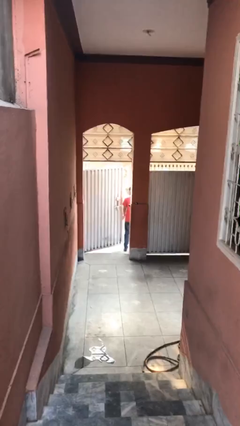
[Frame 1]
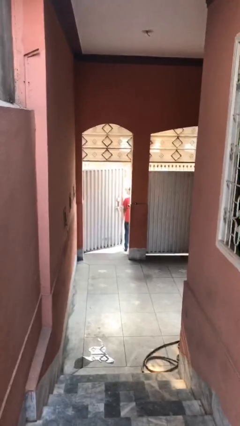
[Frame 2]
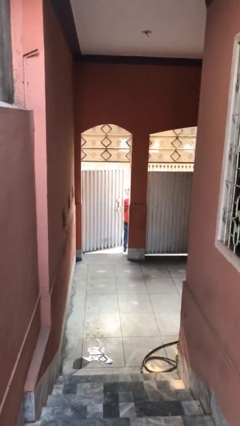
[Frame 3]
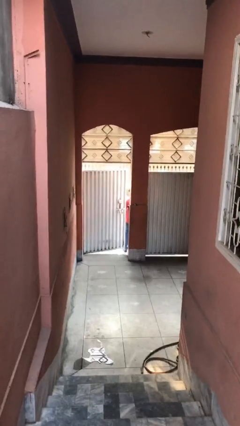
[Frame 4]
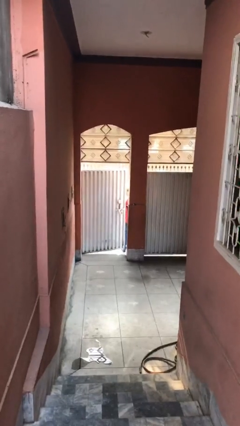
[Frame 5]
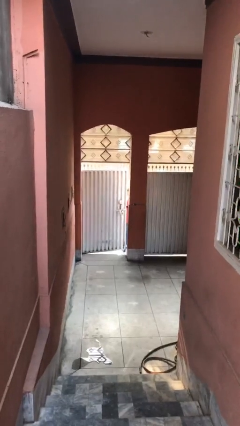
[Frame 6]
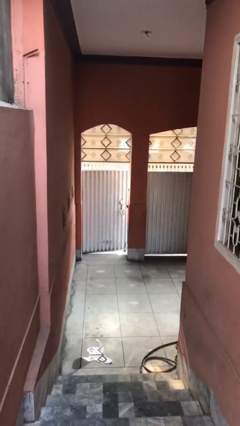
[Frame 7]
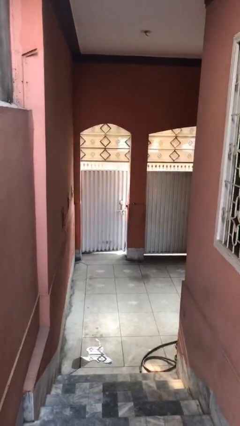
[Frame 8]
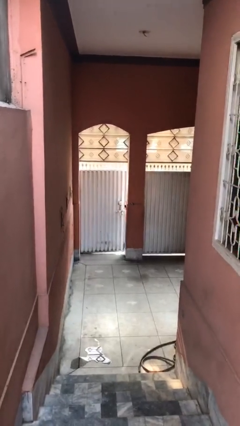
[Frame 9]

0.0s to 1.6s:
person closes facility door

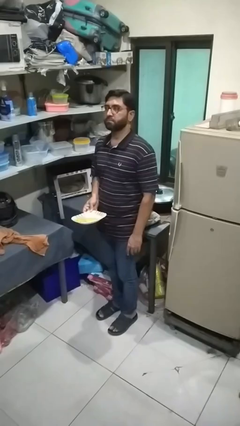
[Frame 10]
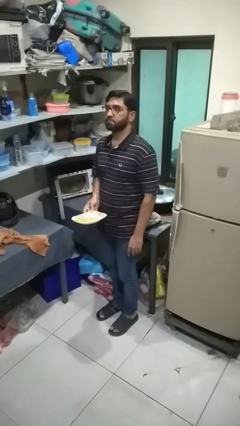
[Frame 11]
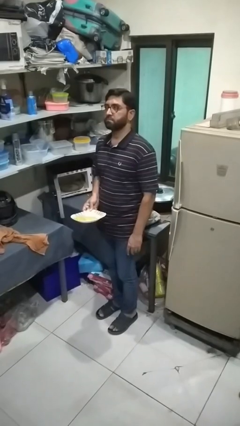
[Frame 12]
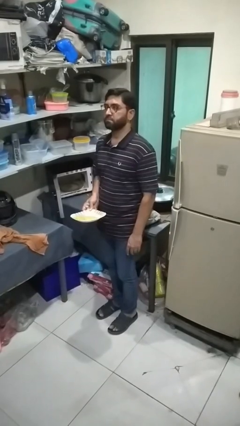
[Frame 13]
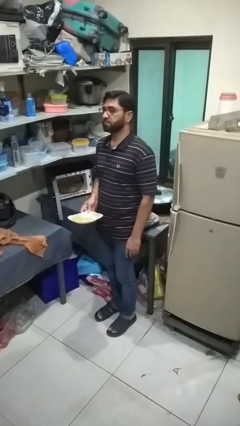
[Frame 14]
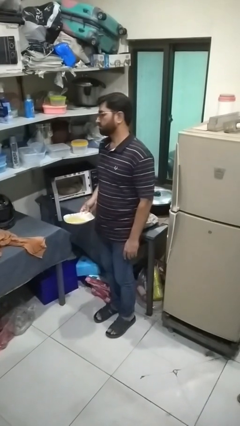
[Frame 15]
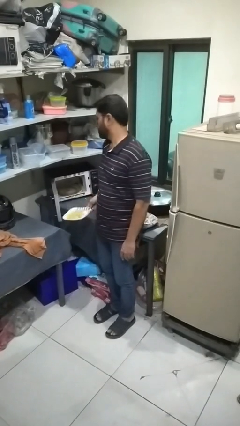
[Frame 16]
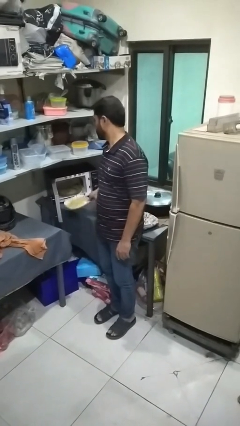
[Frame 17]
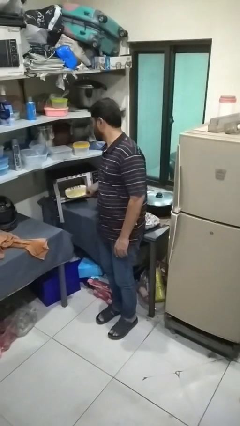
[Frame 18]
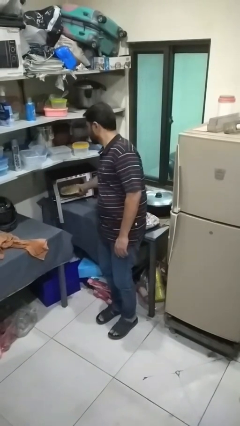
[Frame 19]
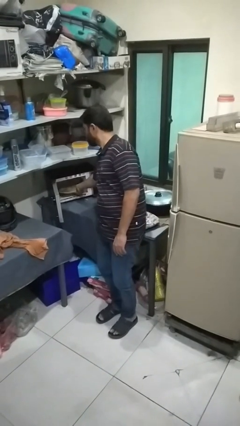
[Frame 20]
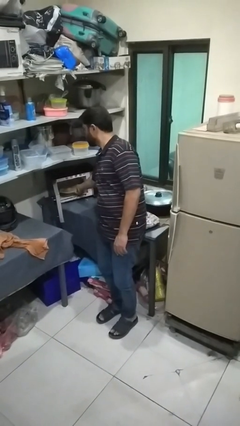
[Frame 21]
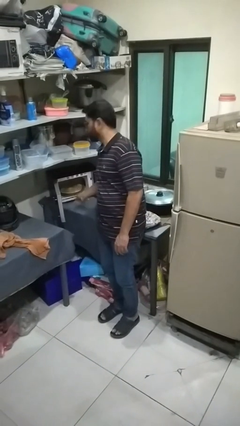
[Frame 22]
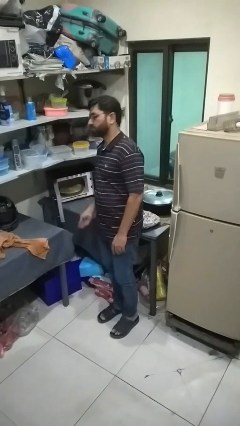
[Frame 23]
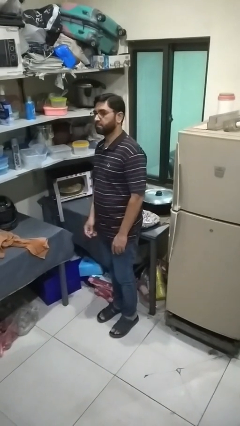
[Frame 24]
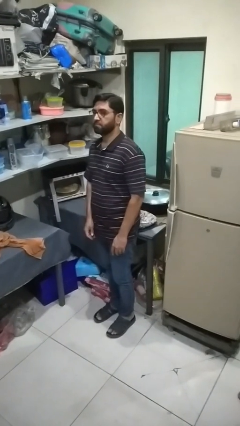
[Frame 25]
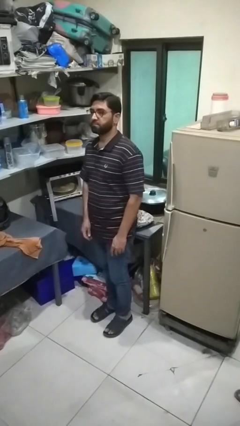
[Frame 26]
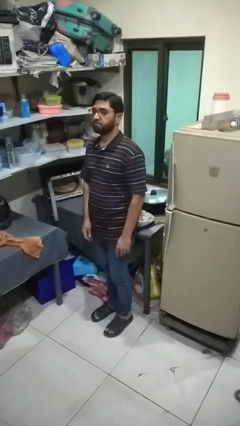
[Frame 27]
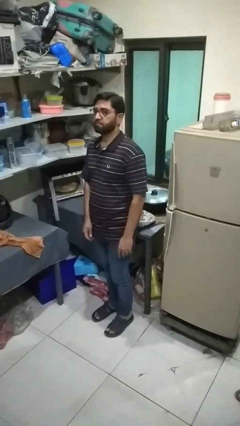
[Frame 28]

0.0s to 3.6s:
person puts object into microwave

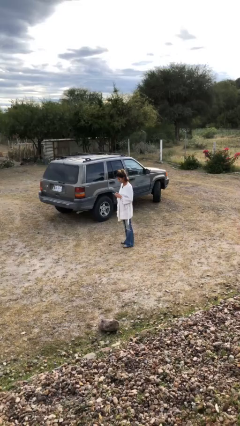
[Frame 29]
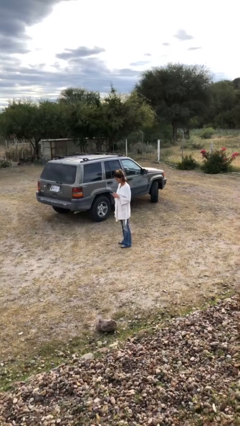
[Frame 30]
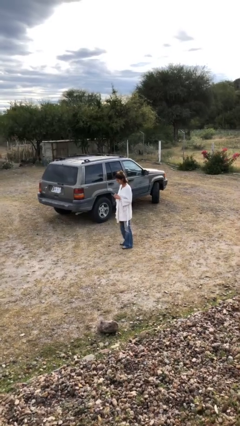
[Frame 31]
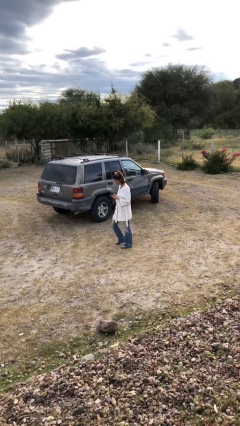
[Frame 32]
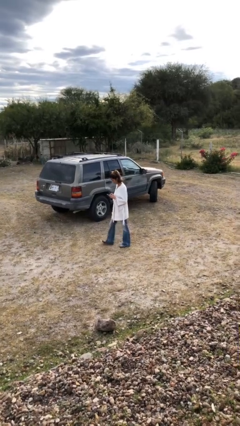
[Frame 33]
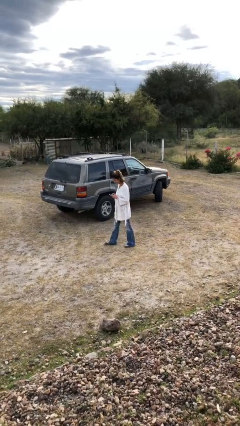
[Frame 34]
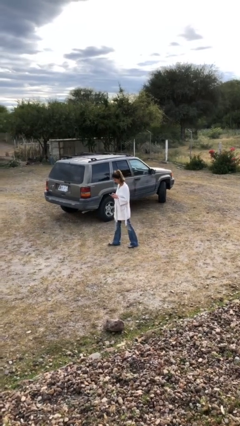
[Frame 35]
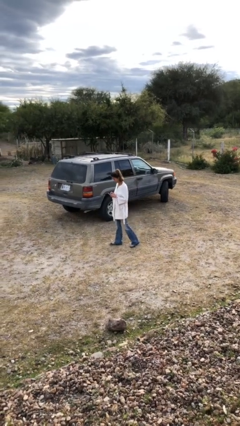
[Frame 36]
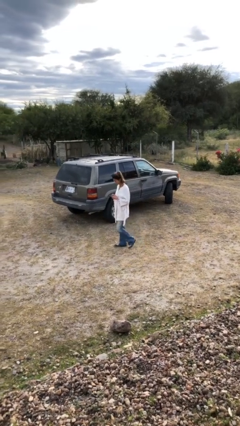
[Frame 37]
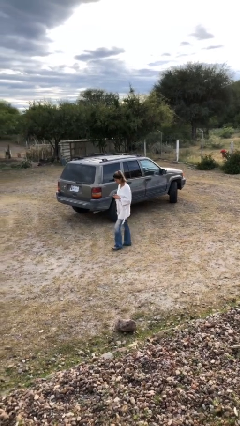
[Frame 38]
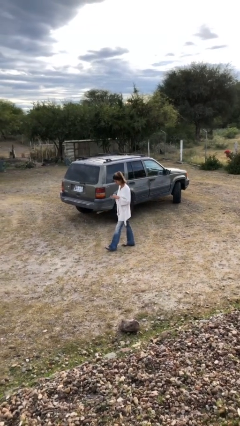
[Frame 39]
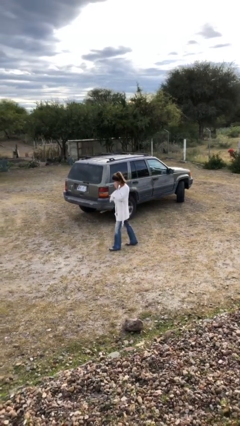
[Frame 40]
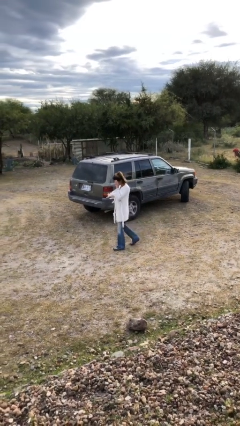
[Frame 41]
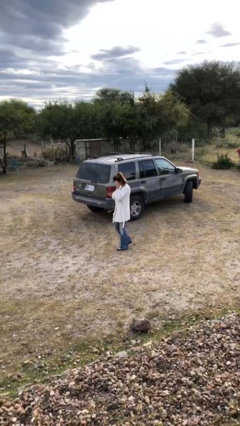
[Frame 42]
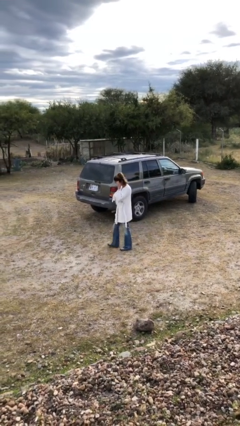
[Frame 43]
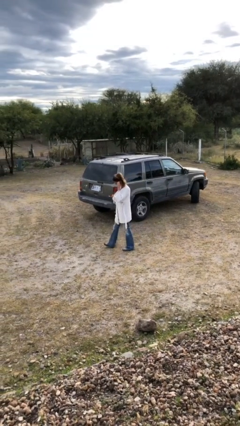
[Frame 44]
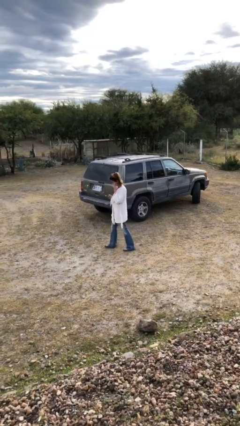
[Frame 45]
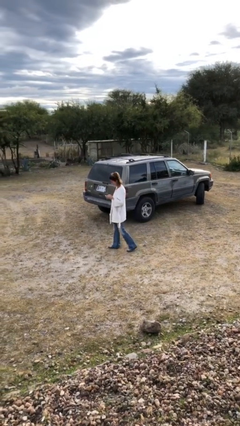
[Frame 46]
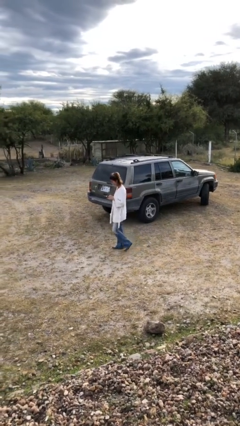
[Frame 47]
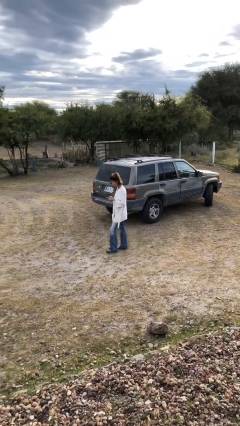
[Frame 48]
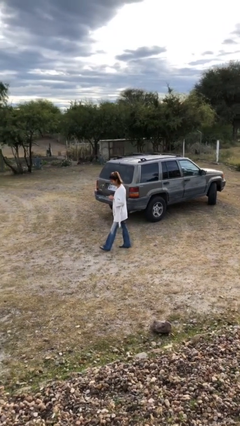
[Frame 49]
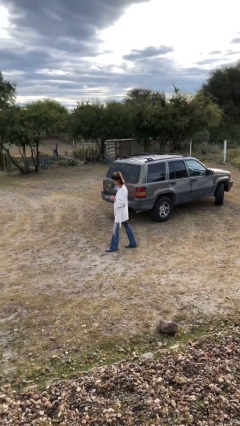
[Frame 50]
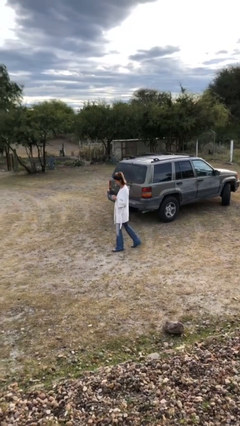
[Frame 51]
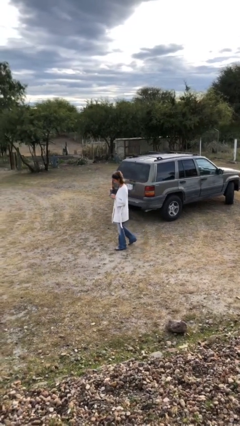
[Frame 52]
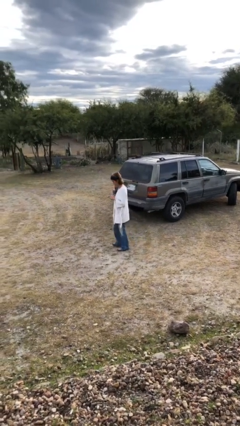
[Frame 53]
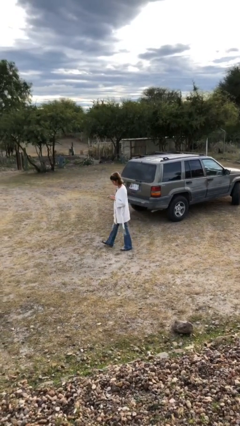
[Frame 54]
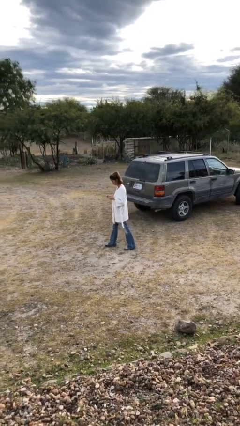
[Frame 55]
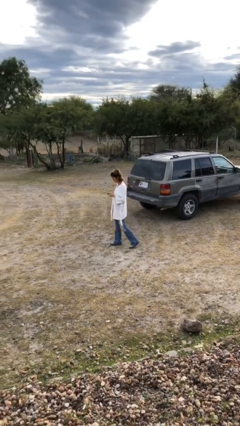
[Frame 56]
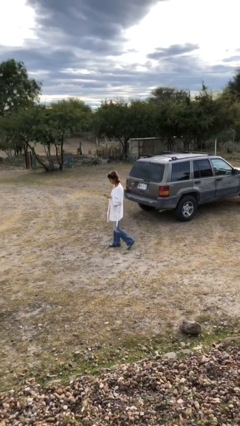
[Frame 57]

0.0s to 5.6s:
person texts on phone

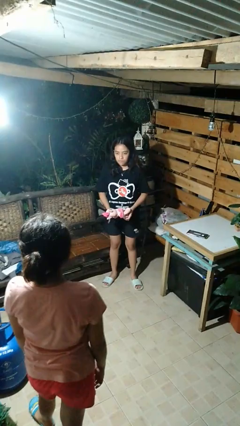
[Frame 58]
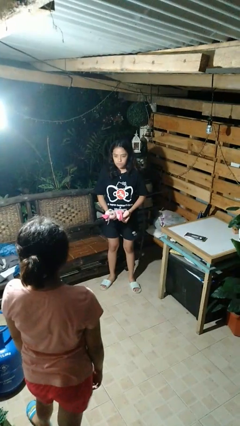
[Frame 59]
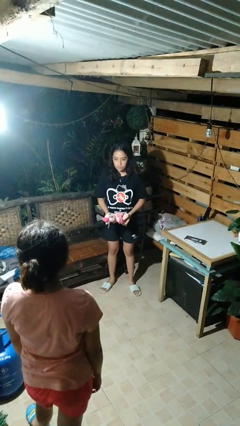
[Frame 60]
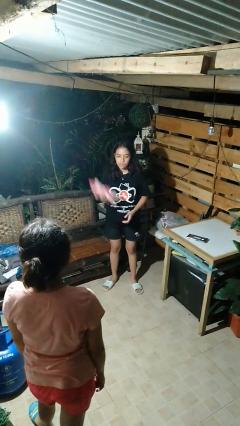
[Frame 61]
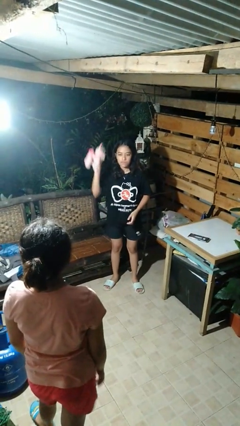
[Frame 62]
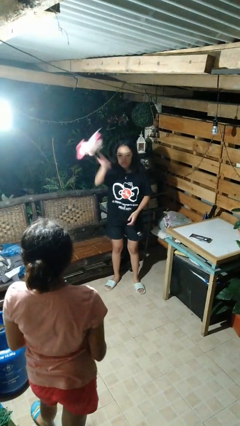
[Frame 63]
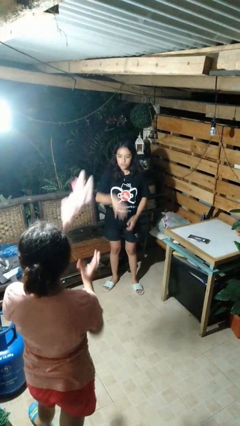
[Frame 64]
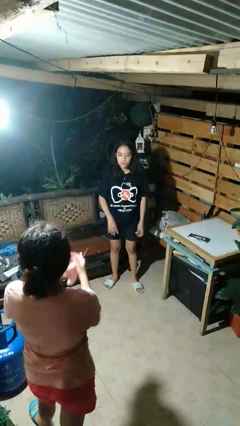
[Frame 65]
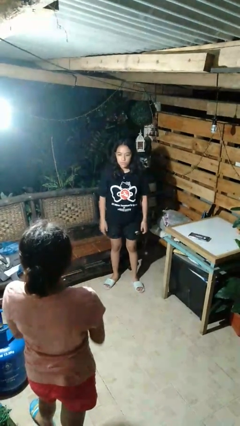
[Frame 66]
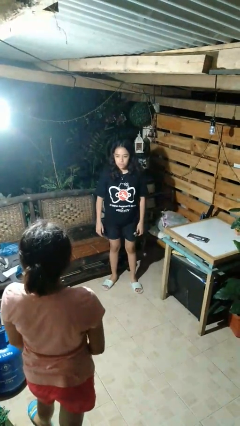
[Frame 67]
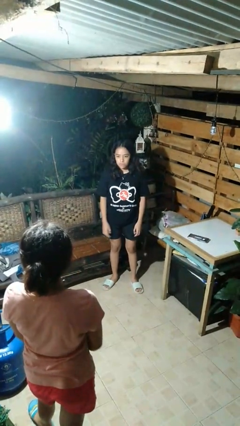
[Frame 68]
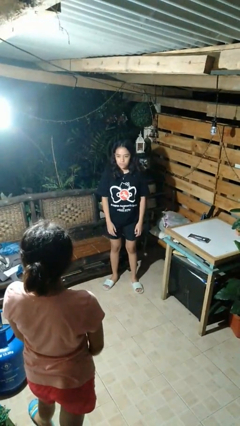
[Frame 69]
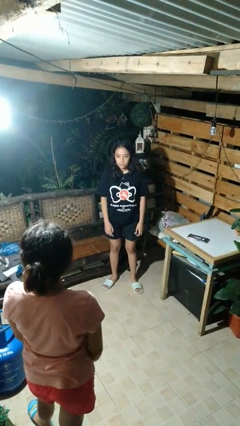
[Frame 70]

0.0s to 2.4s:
person throws object to person

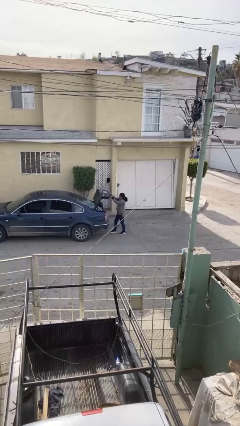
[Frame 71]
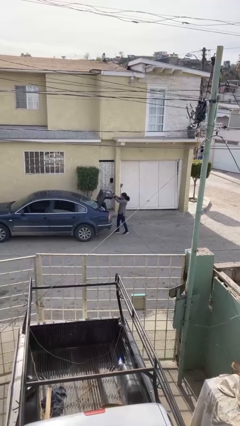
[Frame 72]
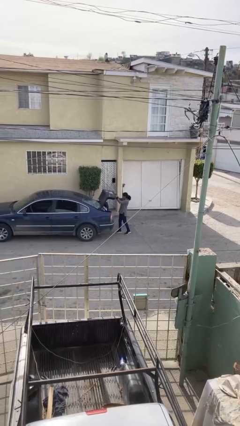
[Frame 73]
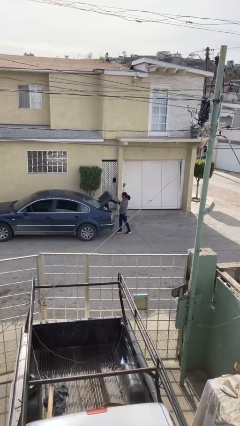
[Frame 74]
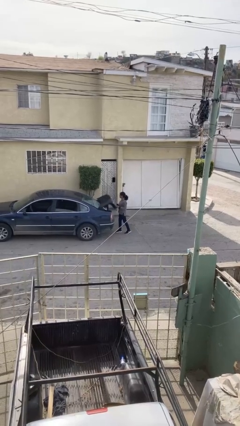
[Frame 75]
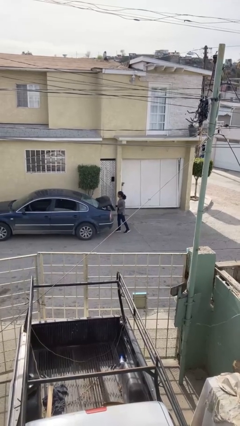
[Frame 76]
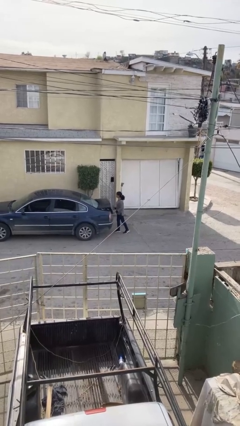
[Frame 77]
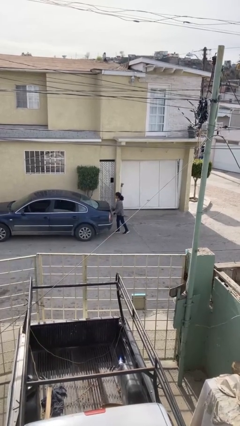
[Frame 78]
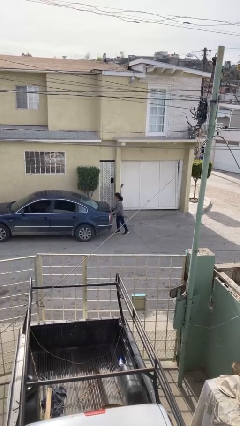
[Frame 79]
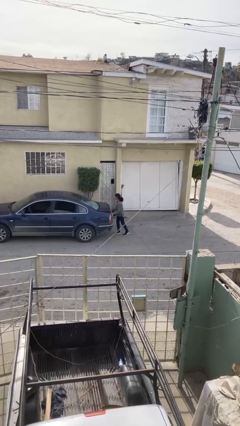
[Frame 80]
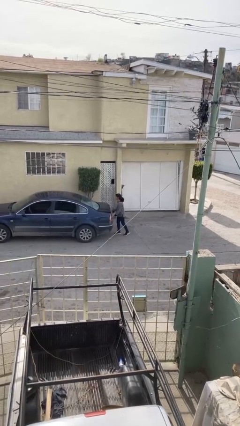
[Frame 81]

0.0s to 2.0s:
person closes car trunk

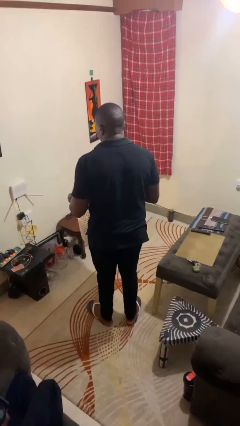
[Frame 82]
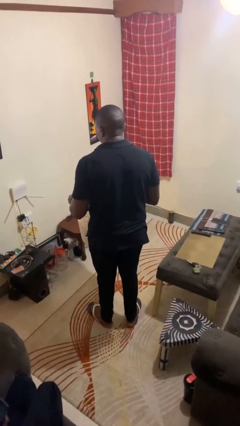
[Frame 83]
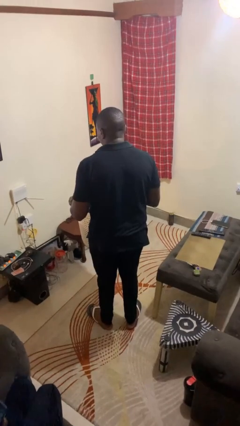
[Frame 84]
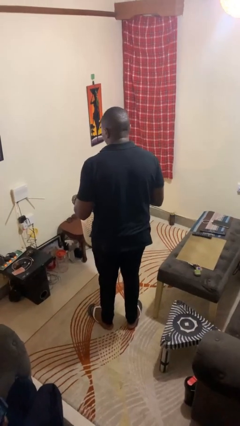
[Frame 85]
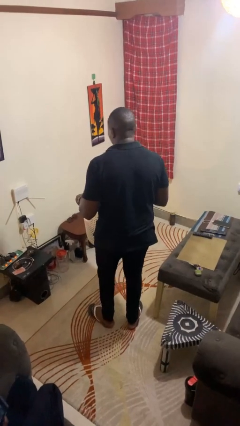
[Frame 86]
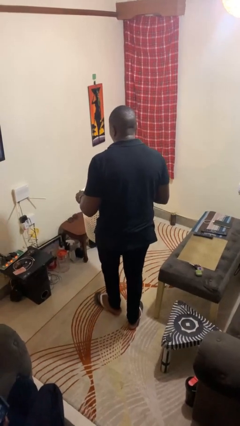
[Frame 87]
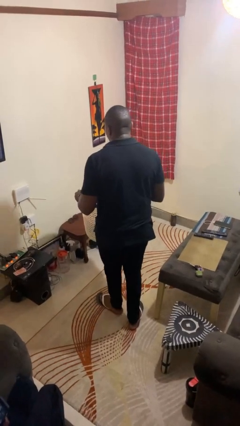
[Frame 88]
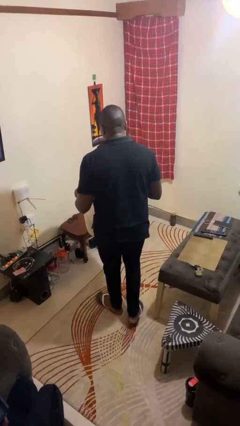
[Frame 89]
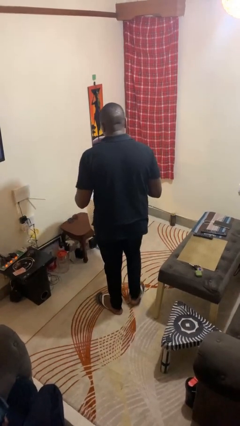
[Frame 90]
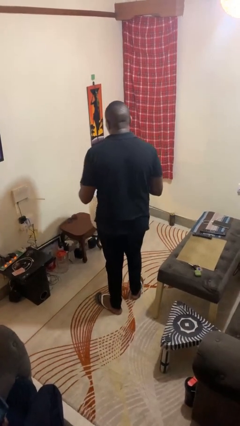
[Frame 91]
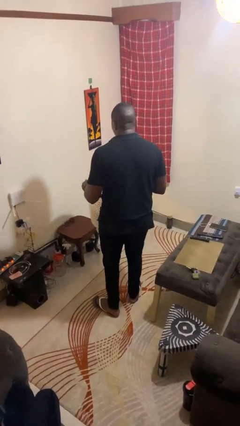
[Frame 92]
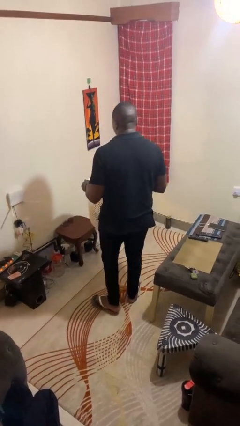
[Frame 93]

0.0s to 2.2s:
person carries laundry basket

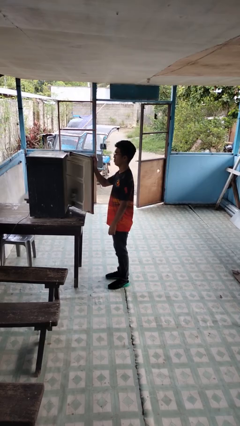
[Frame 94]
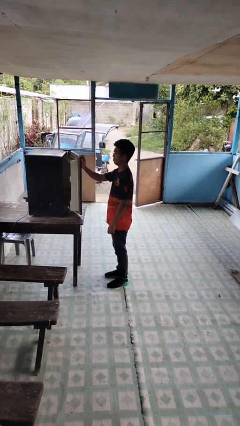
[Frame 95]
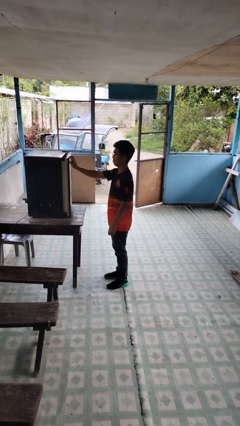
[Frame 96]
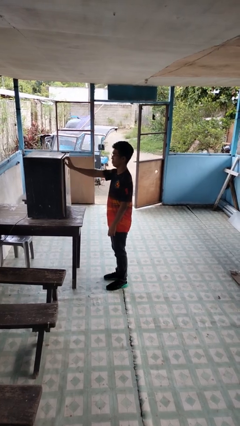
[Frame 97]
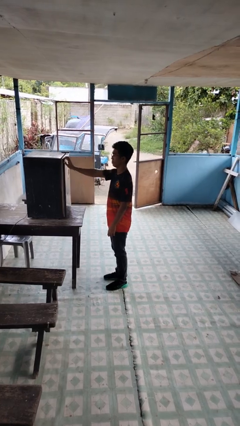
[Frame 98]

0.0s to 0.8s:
person closes refrigerator
